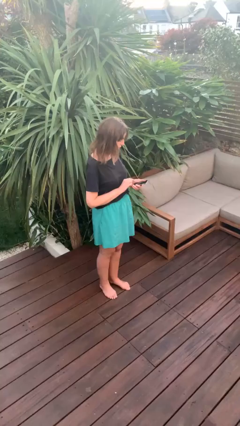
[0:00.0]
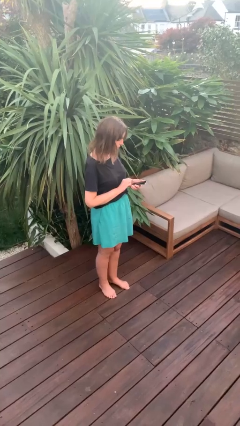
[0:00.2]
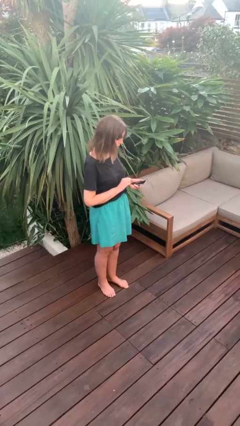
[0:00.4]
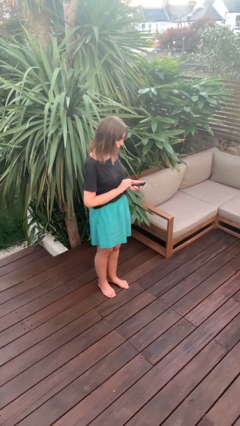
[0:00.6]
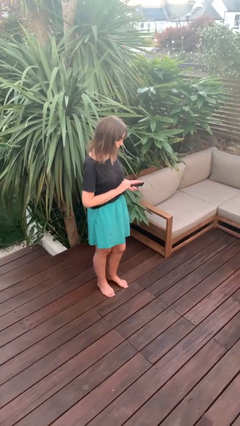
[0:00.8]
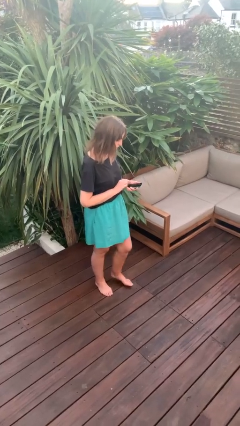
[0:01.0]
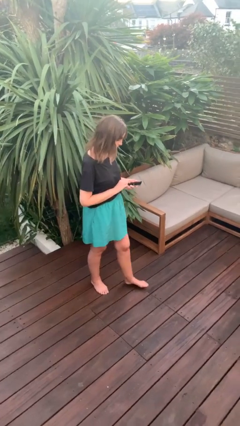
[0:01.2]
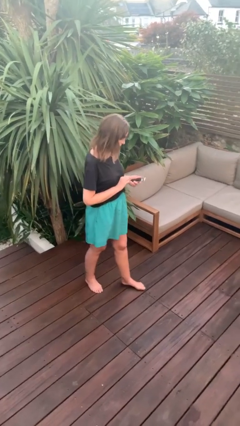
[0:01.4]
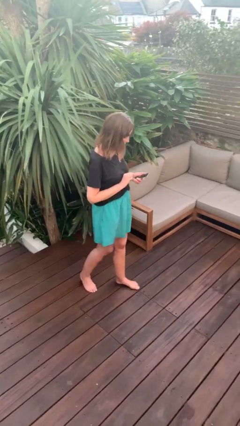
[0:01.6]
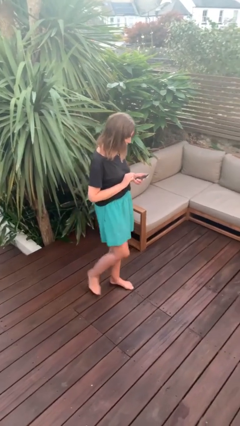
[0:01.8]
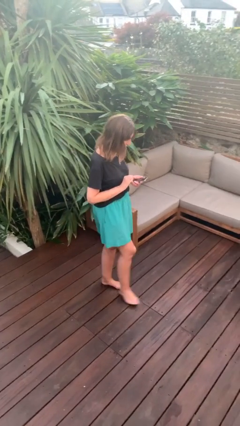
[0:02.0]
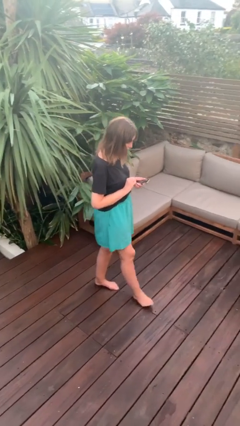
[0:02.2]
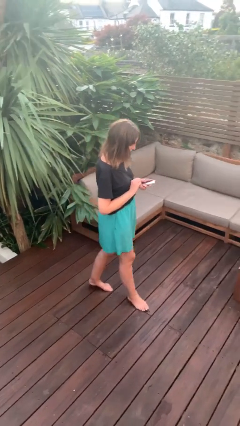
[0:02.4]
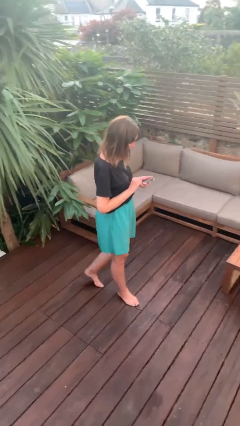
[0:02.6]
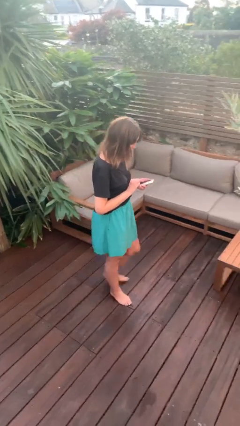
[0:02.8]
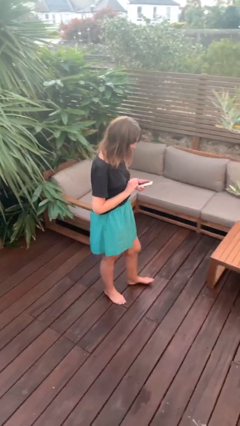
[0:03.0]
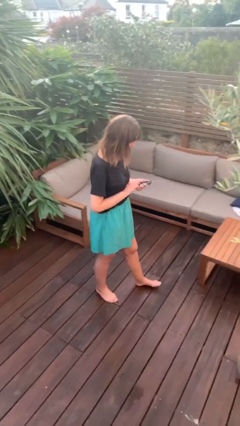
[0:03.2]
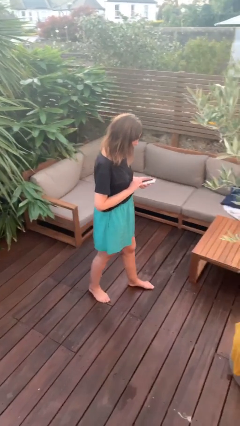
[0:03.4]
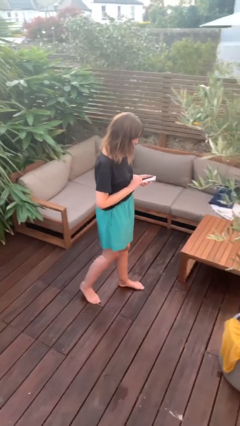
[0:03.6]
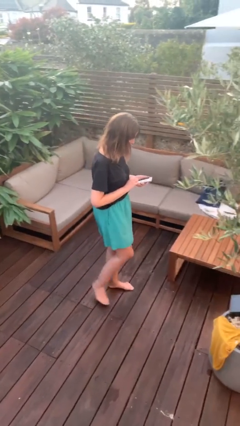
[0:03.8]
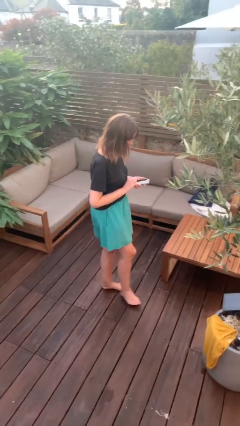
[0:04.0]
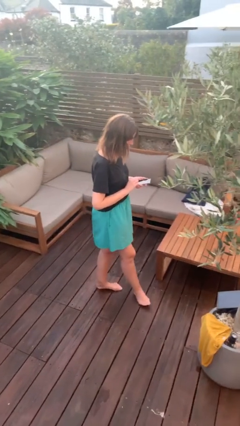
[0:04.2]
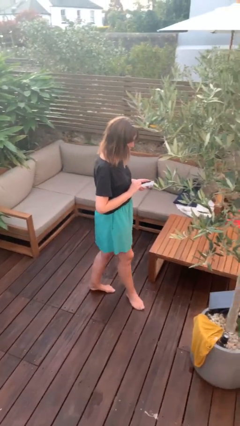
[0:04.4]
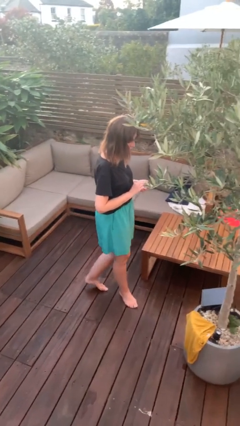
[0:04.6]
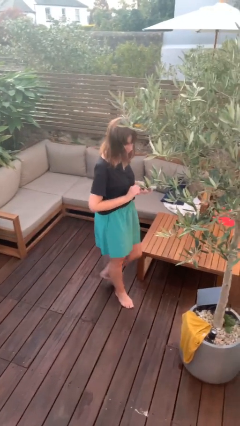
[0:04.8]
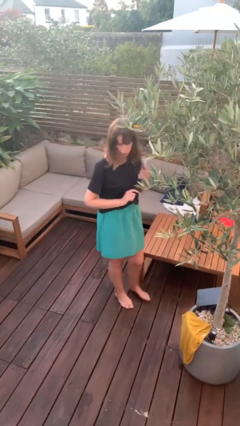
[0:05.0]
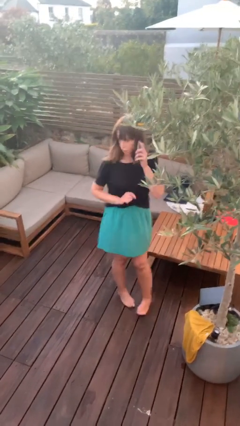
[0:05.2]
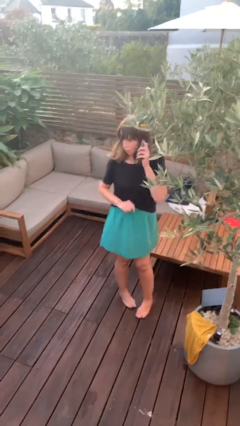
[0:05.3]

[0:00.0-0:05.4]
person texts on phone

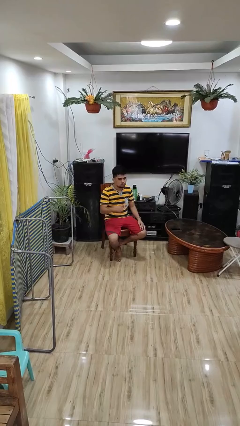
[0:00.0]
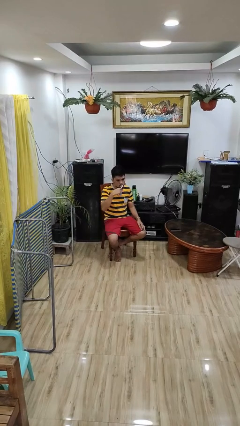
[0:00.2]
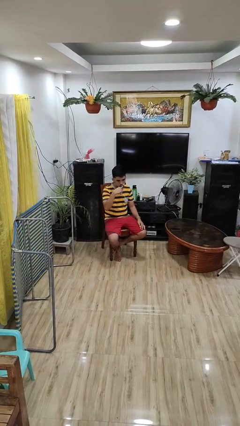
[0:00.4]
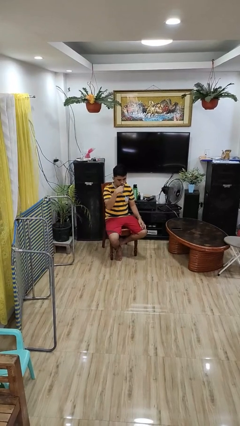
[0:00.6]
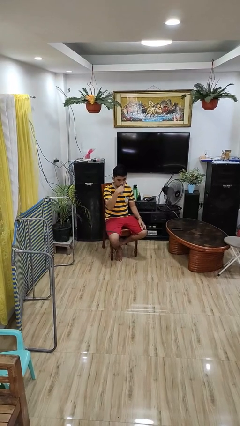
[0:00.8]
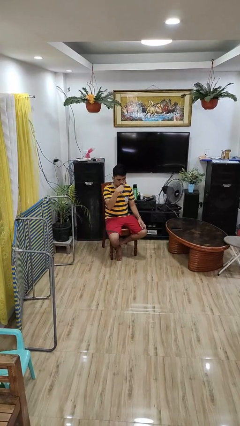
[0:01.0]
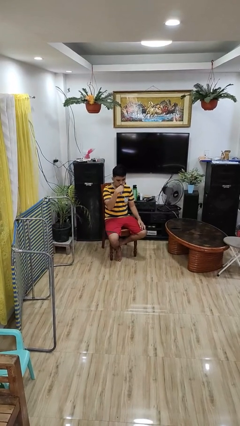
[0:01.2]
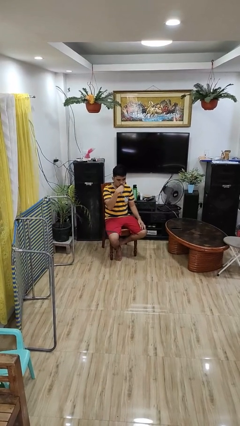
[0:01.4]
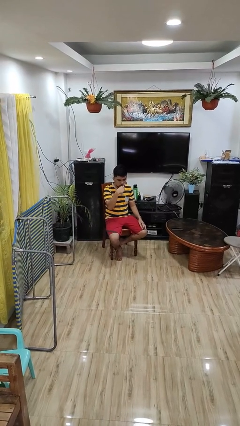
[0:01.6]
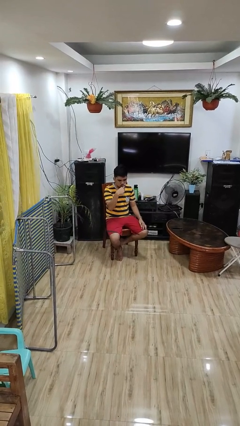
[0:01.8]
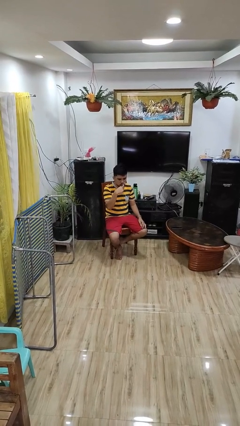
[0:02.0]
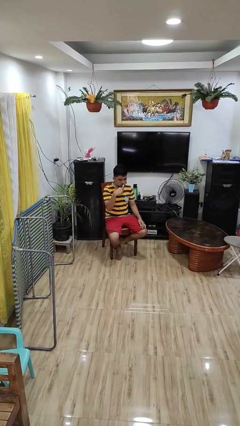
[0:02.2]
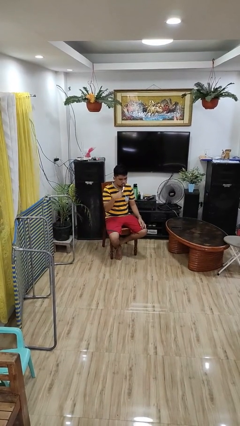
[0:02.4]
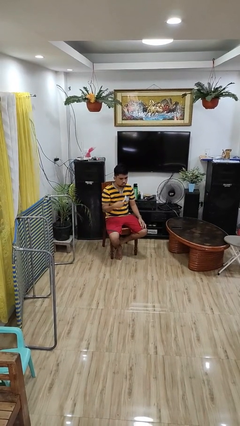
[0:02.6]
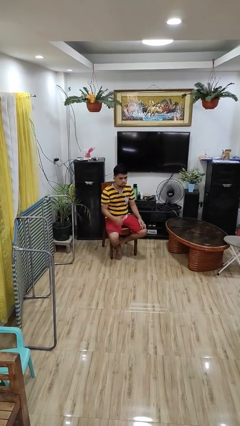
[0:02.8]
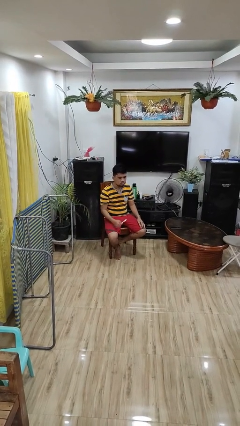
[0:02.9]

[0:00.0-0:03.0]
person brushes teeth

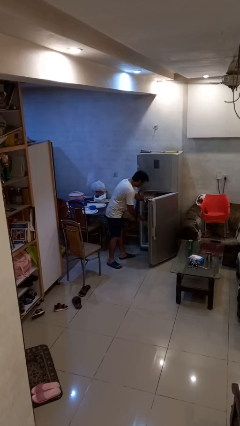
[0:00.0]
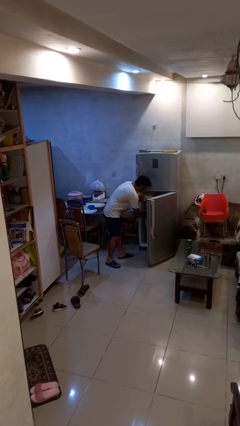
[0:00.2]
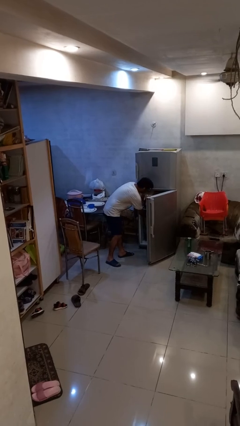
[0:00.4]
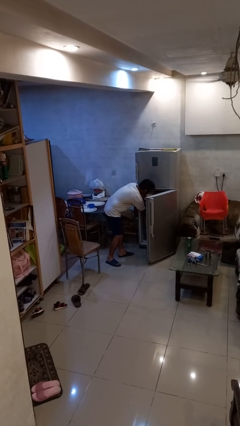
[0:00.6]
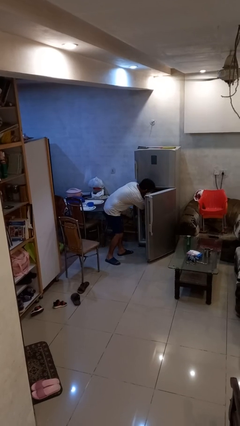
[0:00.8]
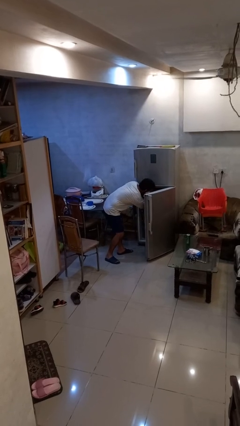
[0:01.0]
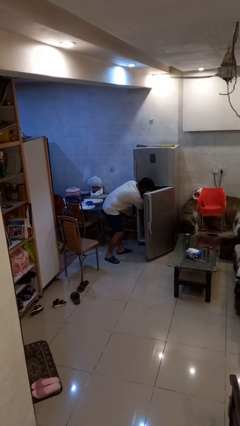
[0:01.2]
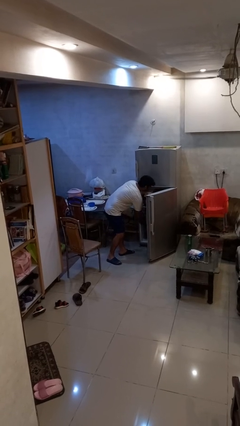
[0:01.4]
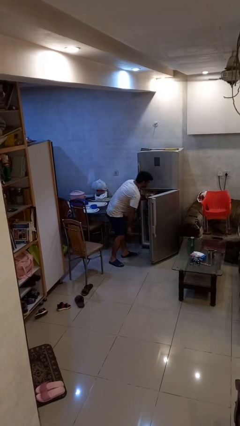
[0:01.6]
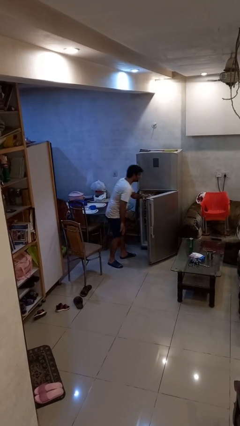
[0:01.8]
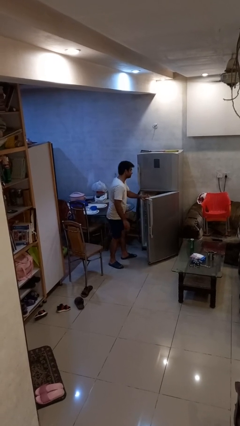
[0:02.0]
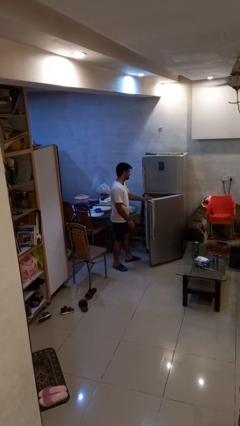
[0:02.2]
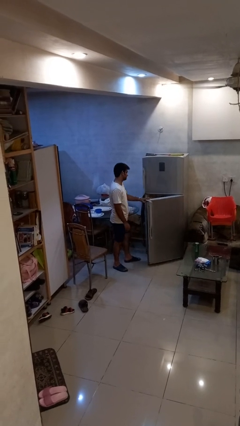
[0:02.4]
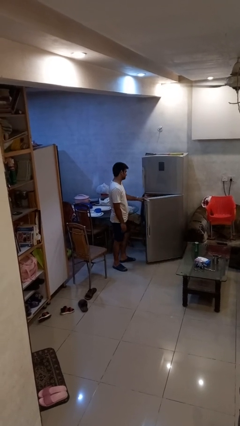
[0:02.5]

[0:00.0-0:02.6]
person puts object into refrigerator

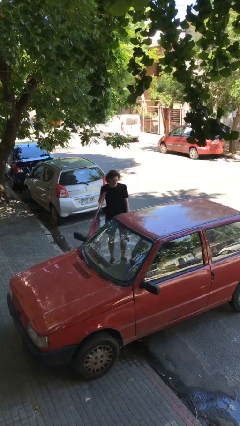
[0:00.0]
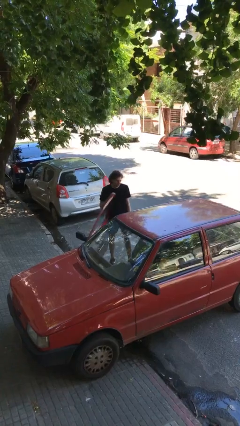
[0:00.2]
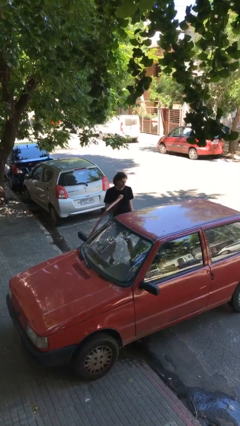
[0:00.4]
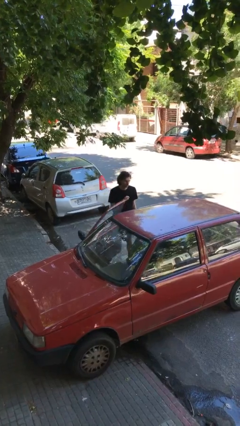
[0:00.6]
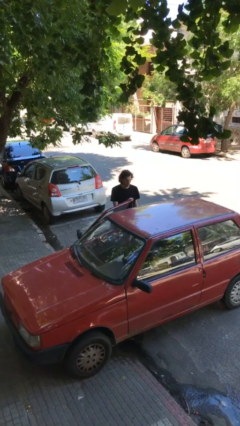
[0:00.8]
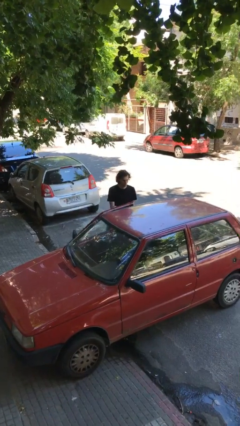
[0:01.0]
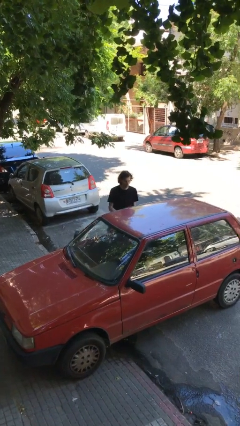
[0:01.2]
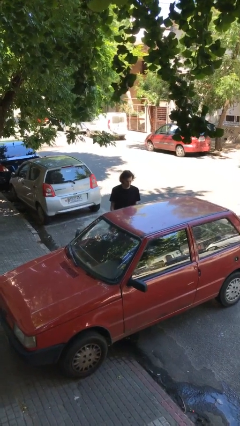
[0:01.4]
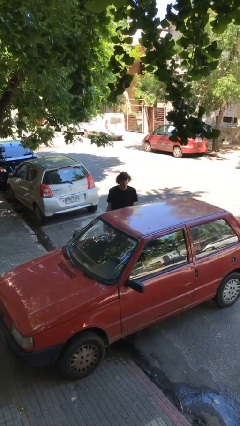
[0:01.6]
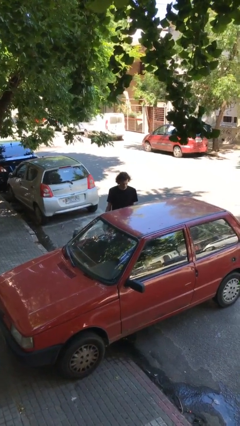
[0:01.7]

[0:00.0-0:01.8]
person closes car door

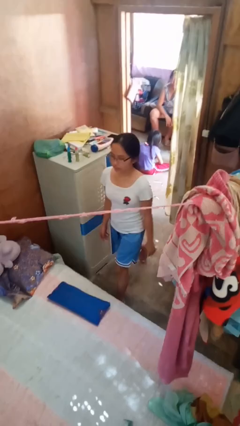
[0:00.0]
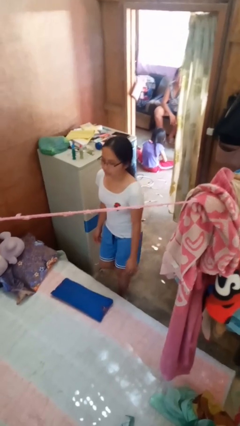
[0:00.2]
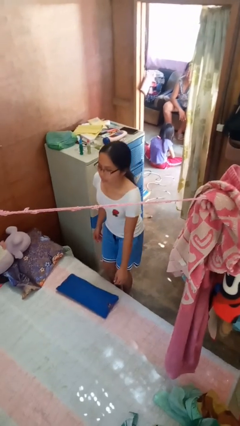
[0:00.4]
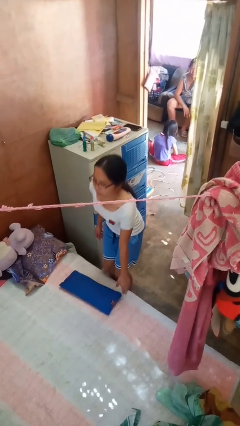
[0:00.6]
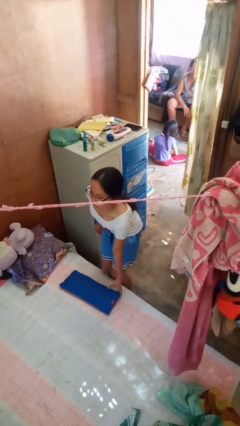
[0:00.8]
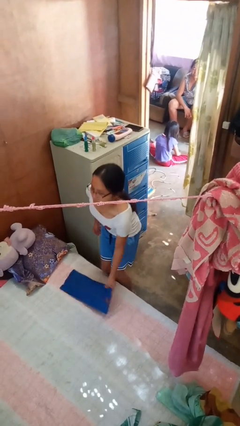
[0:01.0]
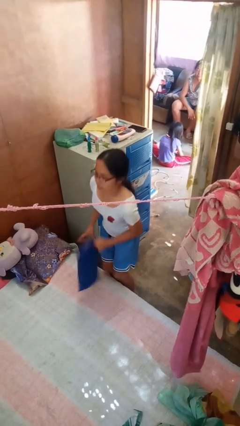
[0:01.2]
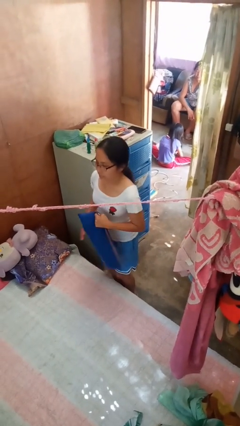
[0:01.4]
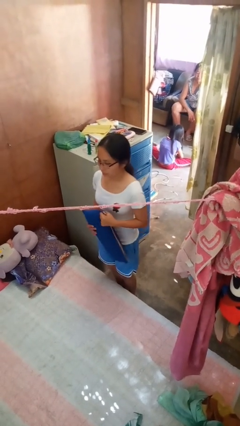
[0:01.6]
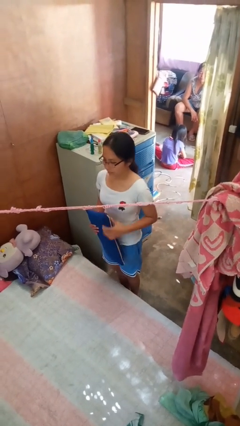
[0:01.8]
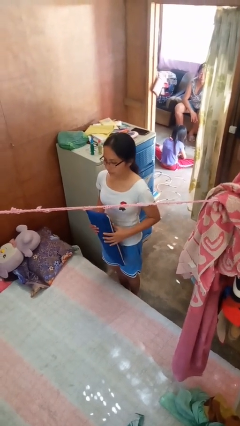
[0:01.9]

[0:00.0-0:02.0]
person picks up object from bed

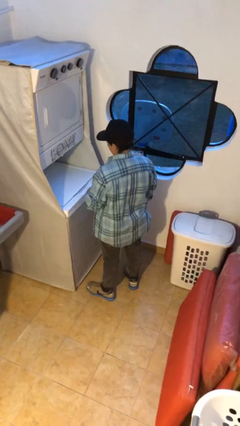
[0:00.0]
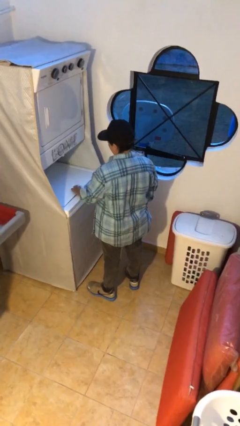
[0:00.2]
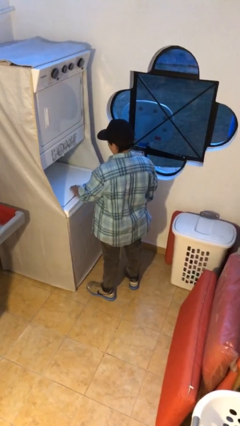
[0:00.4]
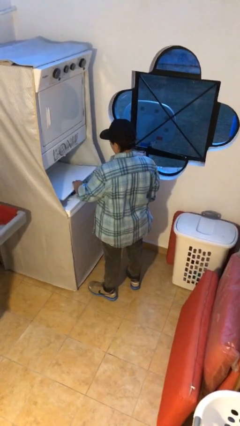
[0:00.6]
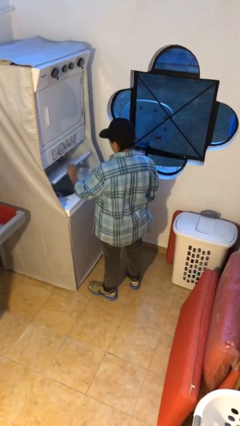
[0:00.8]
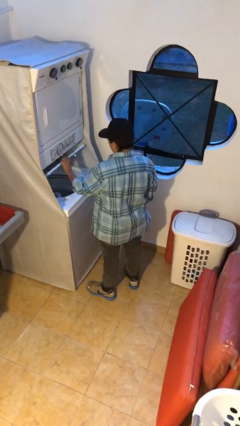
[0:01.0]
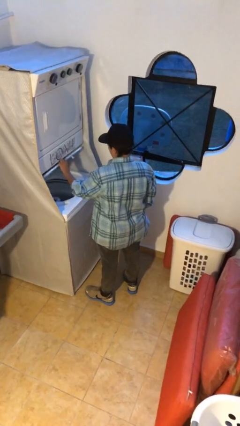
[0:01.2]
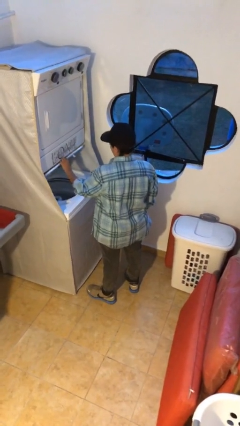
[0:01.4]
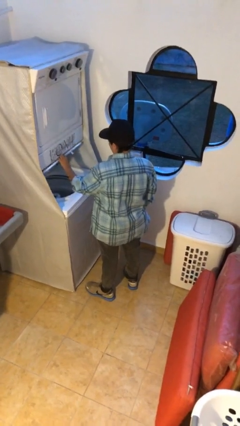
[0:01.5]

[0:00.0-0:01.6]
person opens clothes washer

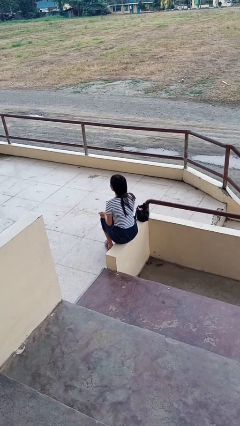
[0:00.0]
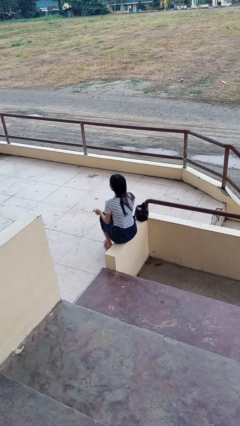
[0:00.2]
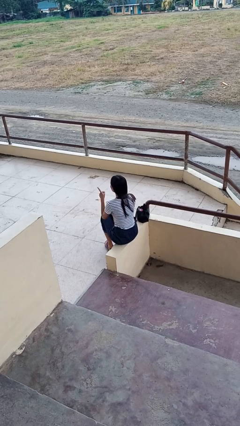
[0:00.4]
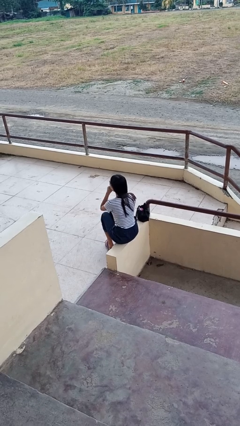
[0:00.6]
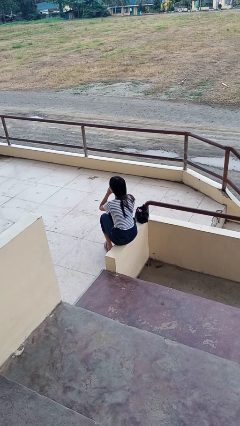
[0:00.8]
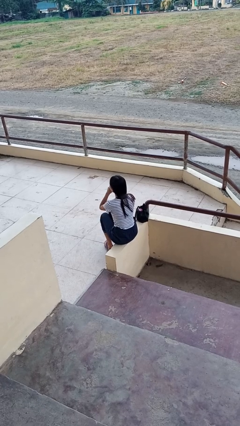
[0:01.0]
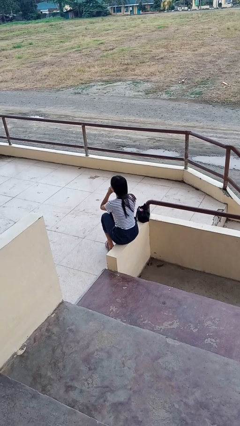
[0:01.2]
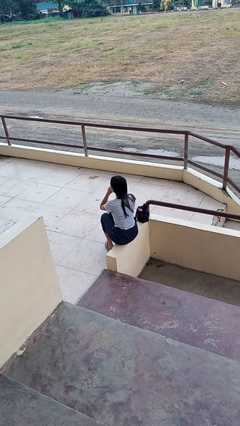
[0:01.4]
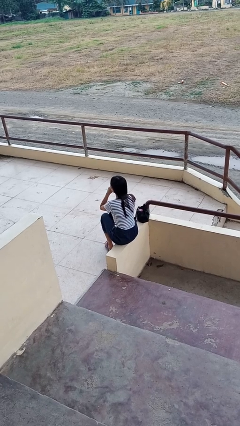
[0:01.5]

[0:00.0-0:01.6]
person gestures be quiet
